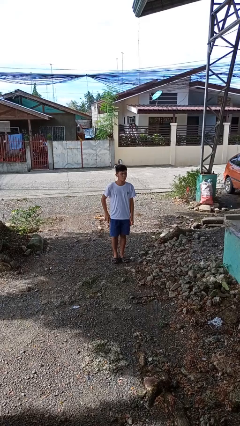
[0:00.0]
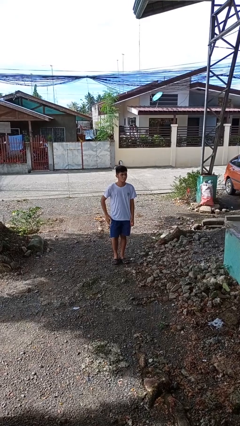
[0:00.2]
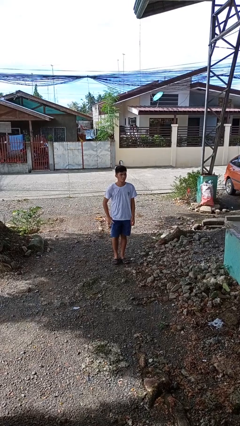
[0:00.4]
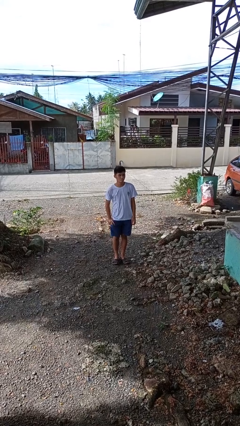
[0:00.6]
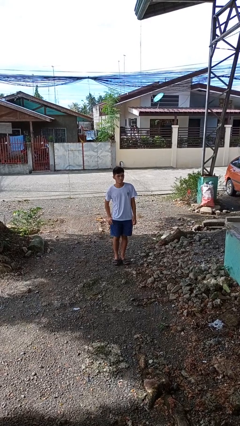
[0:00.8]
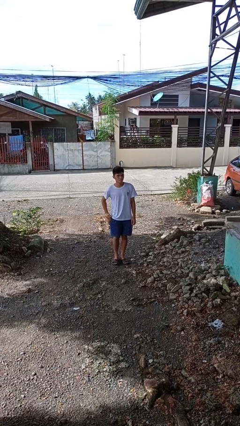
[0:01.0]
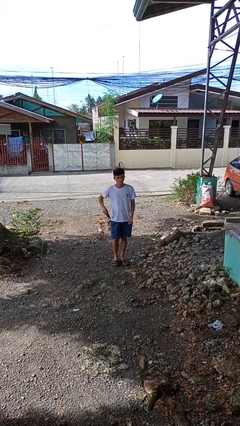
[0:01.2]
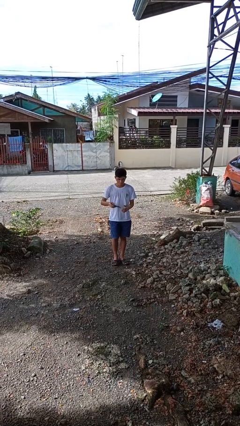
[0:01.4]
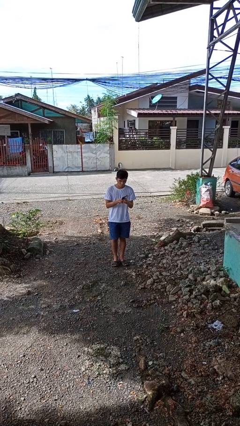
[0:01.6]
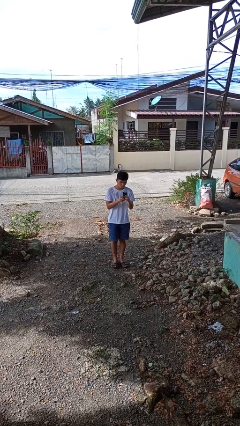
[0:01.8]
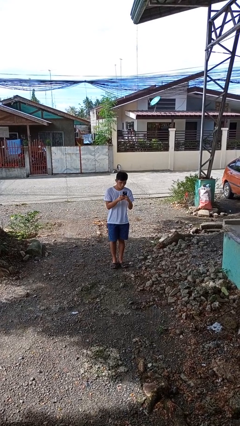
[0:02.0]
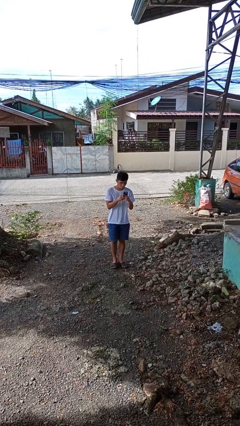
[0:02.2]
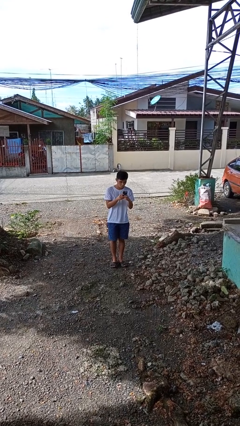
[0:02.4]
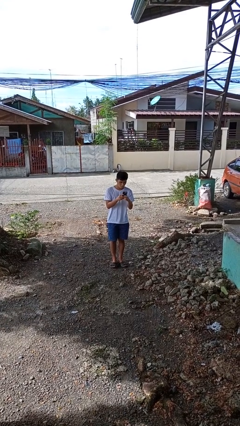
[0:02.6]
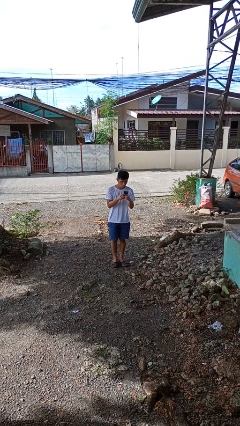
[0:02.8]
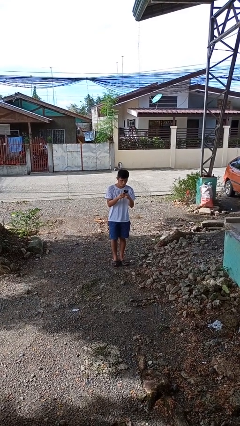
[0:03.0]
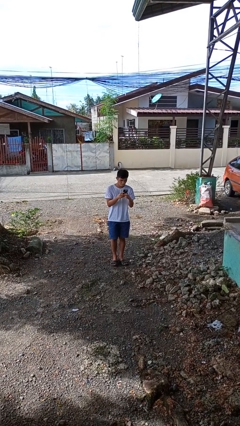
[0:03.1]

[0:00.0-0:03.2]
person takes phone from pocket

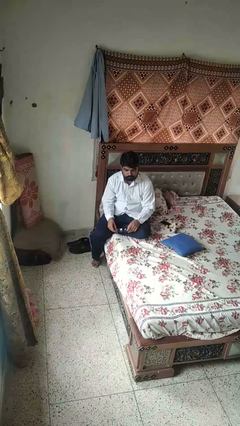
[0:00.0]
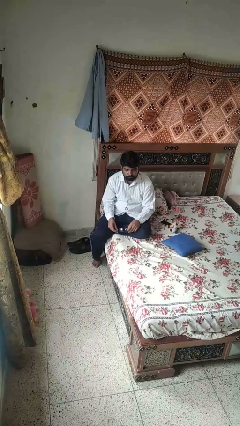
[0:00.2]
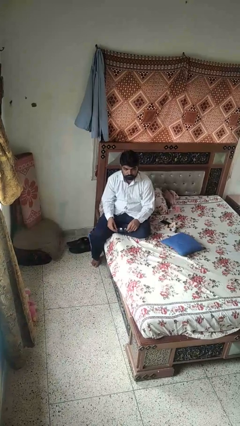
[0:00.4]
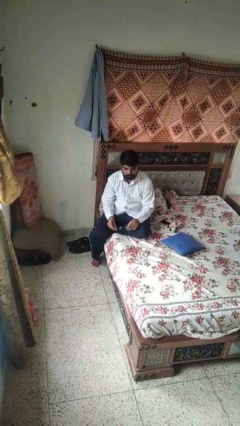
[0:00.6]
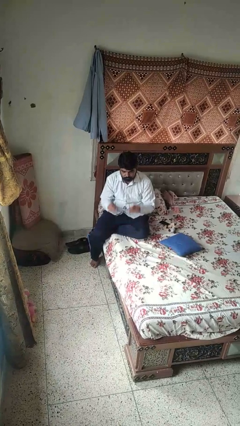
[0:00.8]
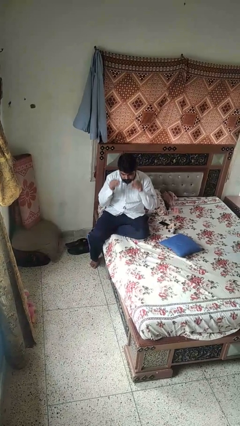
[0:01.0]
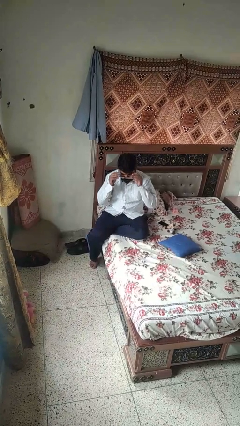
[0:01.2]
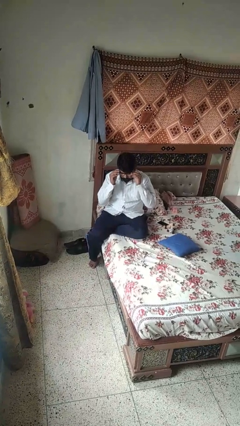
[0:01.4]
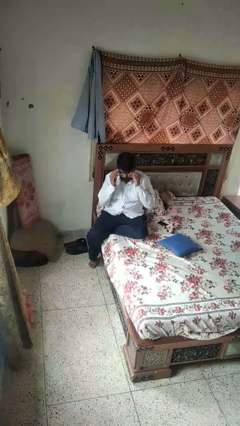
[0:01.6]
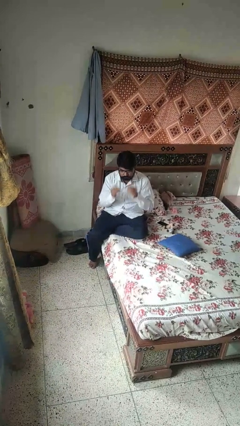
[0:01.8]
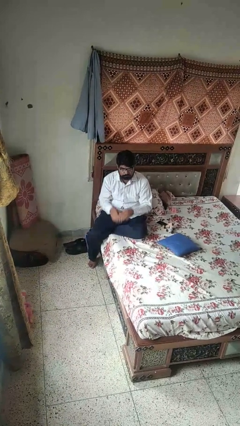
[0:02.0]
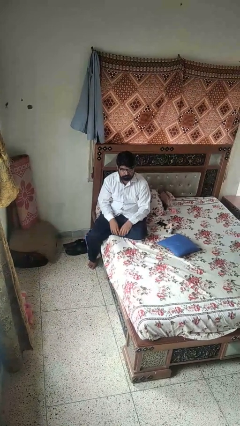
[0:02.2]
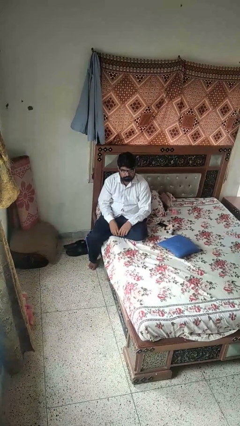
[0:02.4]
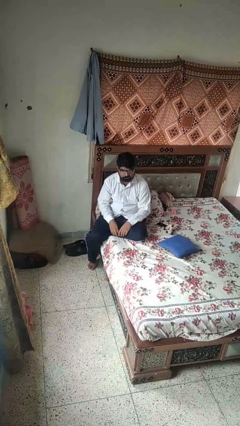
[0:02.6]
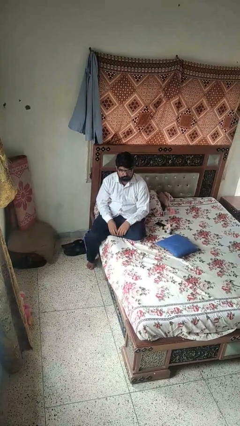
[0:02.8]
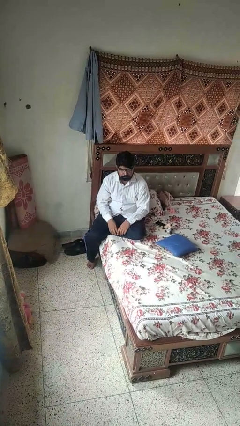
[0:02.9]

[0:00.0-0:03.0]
person puts on glasses

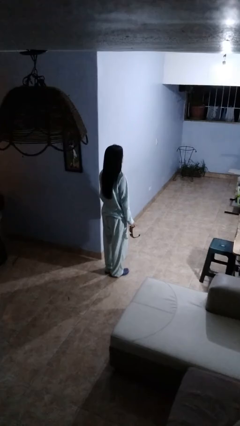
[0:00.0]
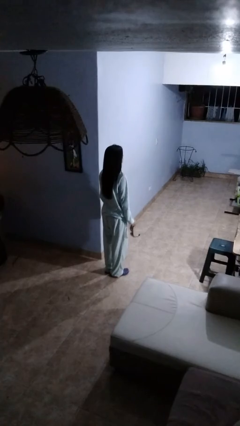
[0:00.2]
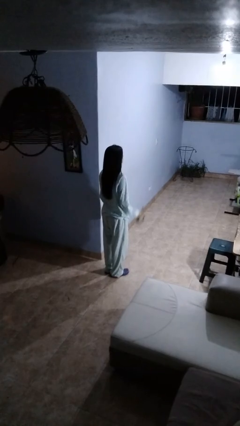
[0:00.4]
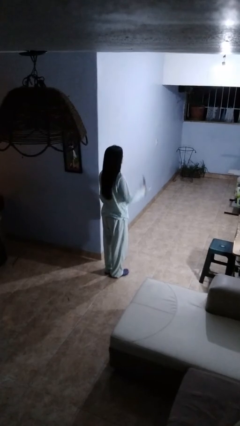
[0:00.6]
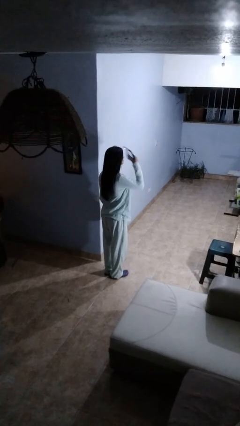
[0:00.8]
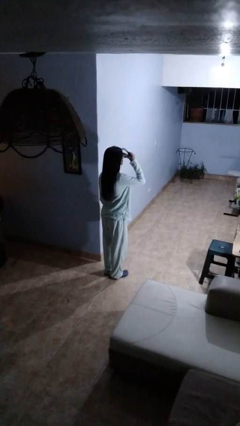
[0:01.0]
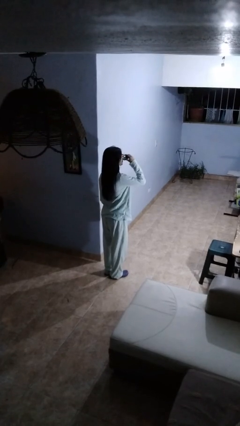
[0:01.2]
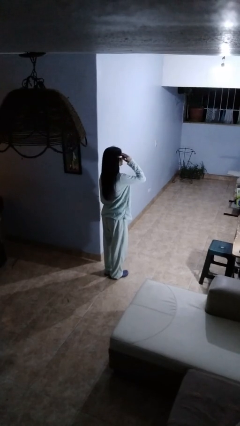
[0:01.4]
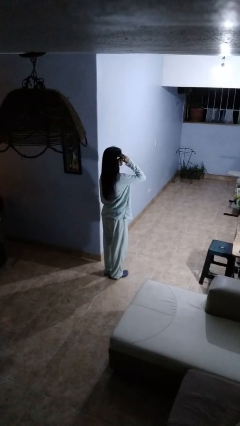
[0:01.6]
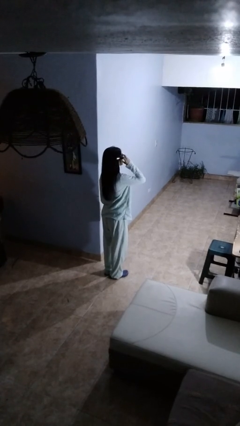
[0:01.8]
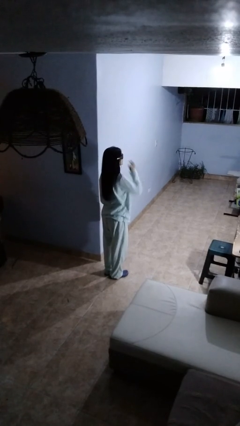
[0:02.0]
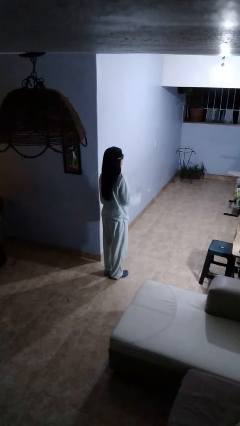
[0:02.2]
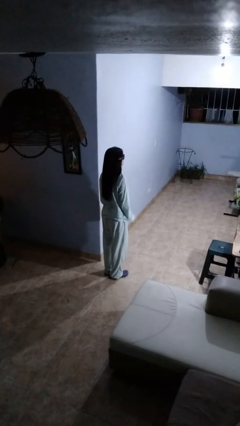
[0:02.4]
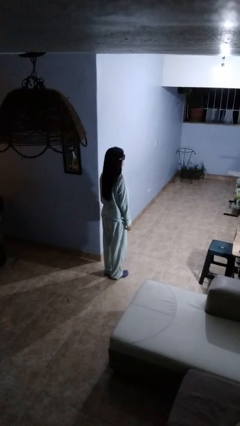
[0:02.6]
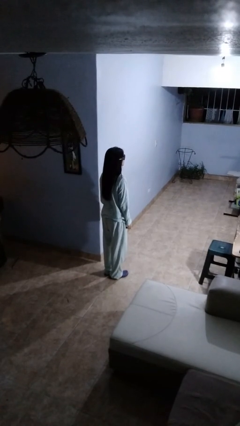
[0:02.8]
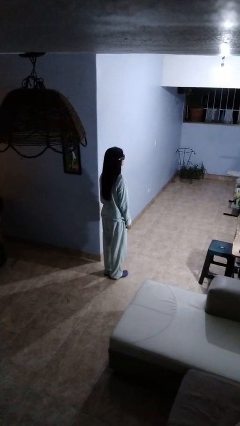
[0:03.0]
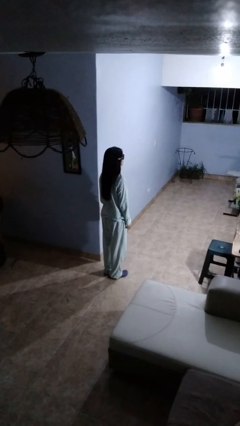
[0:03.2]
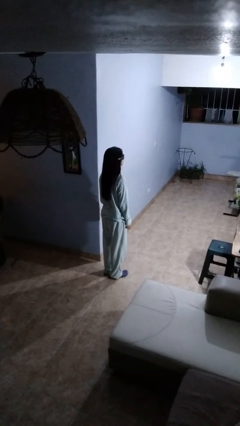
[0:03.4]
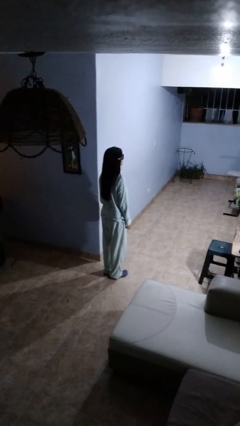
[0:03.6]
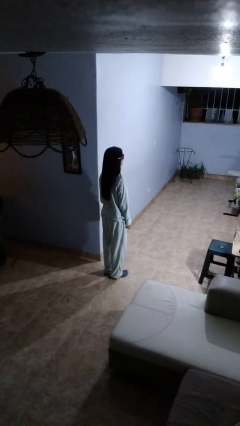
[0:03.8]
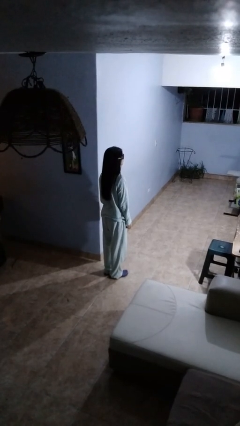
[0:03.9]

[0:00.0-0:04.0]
person puts on sunglasses

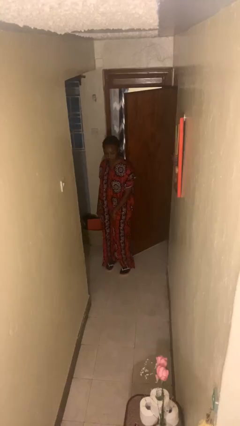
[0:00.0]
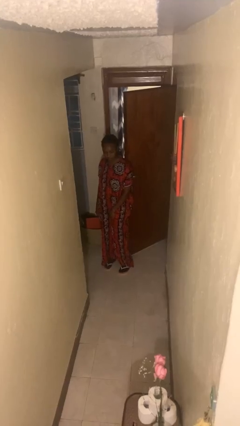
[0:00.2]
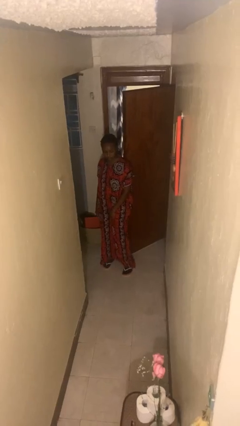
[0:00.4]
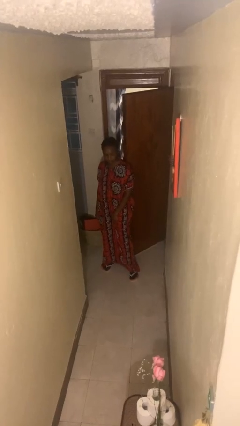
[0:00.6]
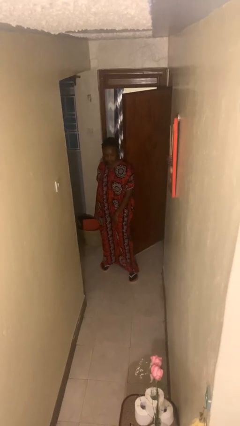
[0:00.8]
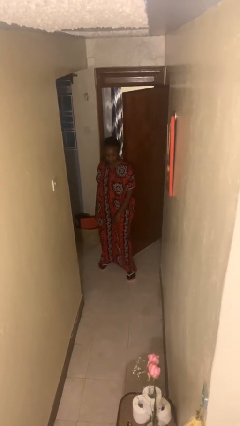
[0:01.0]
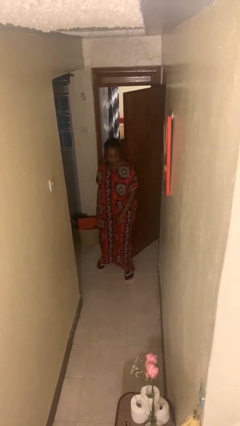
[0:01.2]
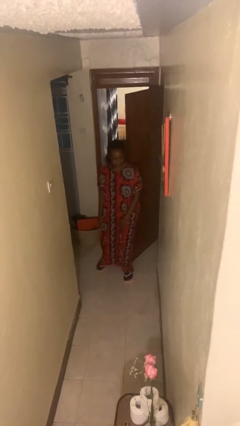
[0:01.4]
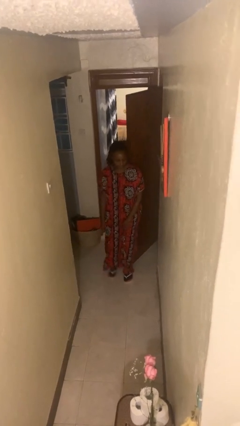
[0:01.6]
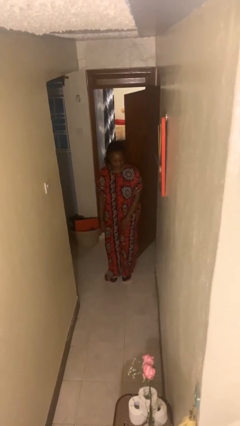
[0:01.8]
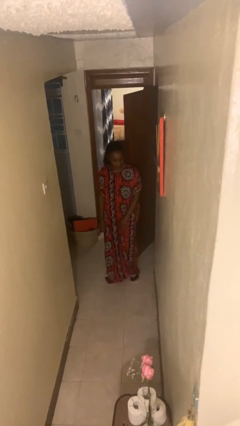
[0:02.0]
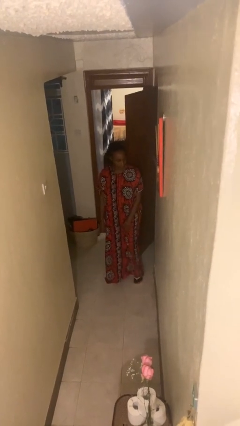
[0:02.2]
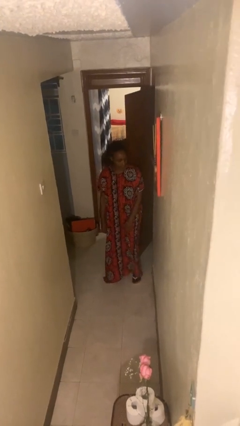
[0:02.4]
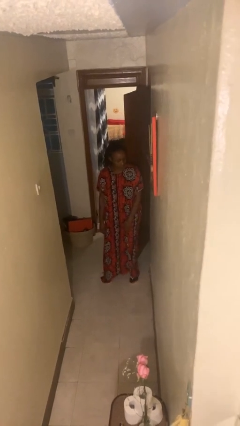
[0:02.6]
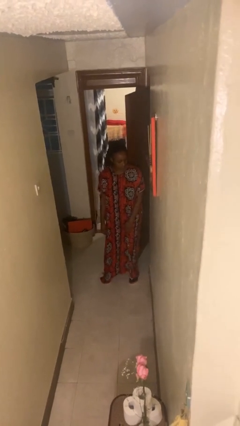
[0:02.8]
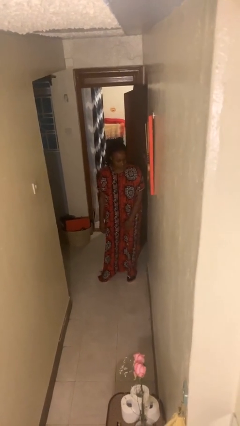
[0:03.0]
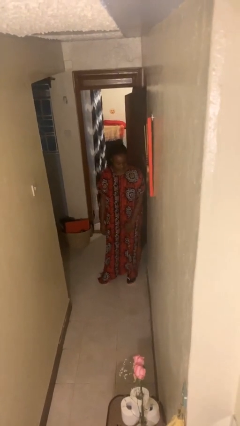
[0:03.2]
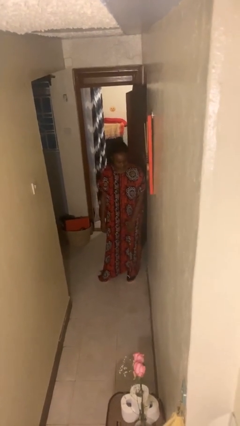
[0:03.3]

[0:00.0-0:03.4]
person closes door with hip

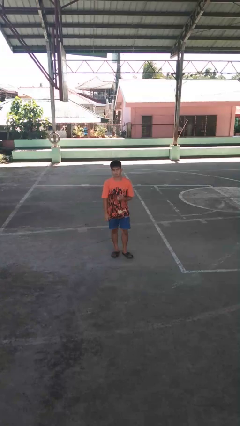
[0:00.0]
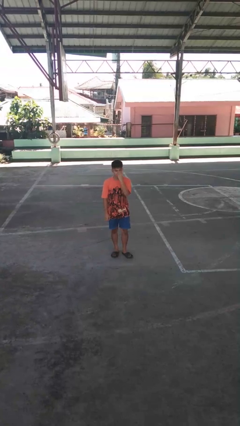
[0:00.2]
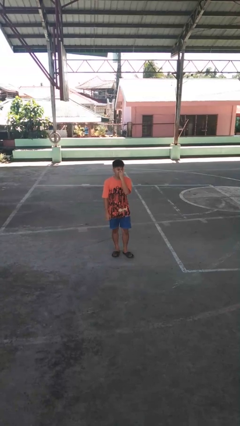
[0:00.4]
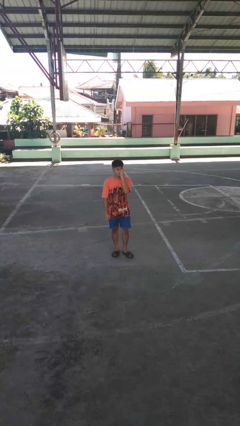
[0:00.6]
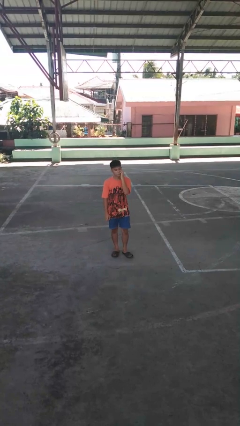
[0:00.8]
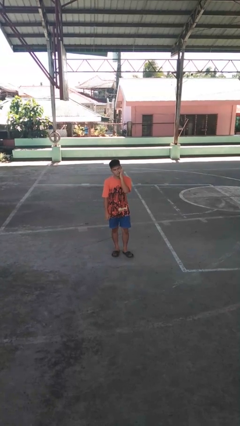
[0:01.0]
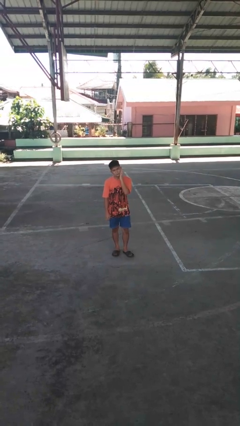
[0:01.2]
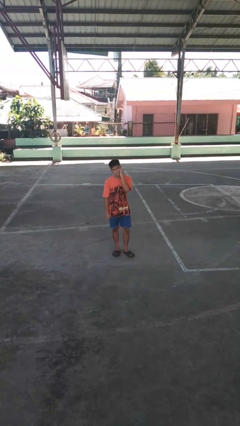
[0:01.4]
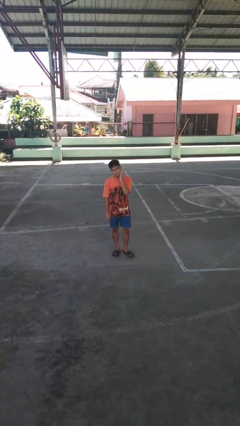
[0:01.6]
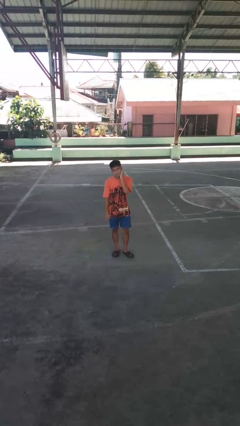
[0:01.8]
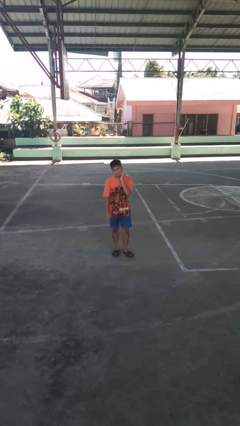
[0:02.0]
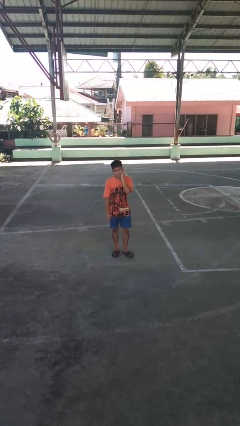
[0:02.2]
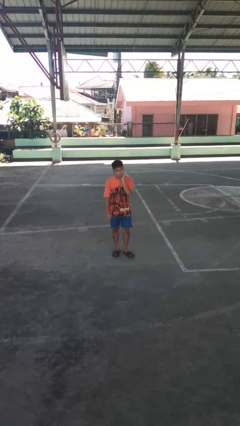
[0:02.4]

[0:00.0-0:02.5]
person scratches face

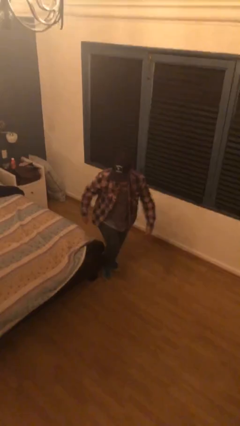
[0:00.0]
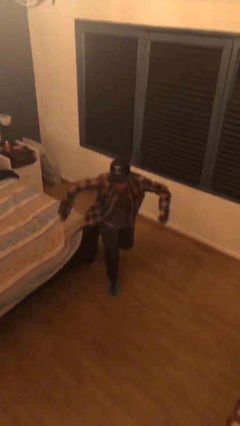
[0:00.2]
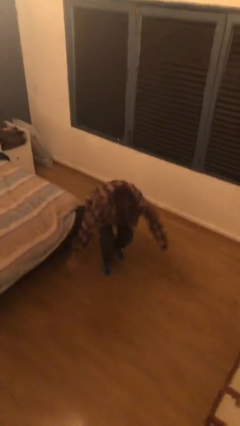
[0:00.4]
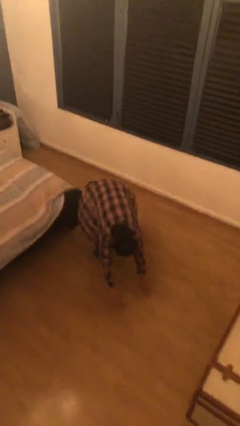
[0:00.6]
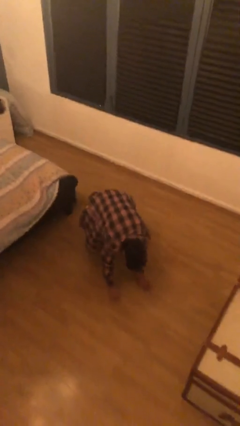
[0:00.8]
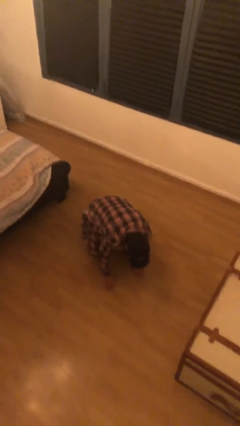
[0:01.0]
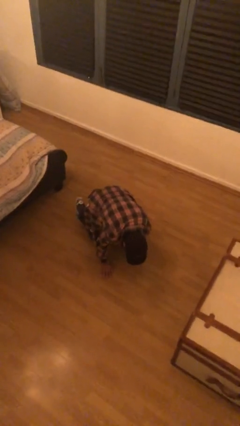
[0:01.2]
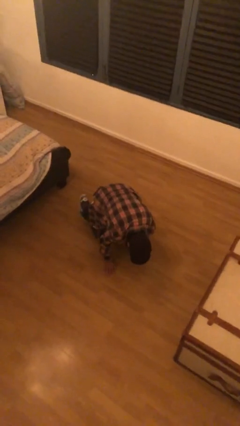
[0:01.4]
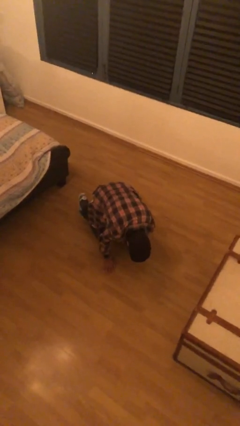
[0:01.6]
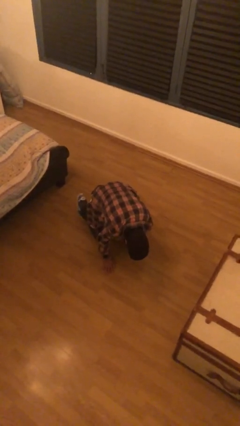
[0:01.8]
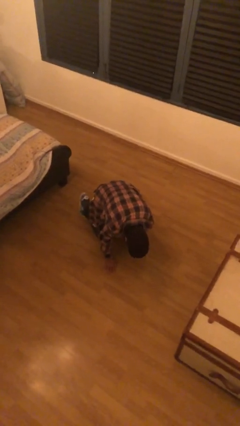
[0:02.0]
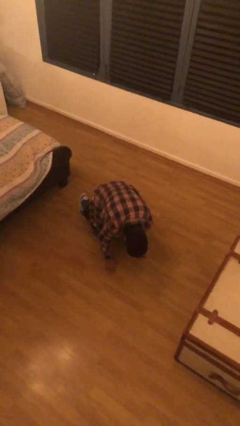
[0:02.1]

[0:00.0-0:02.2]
person trips on object on floor
